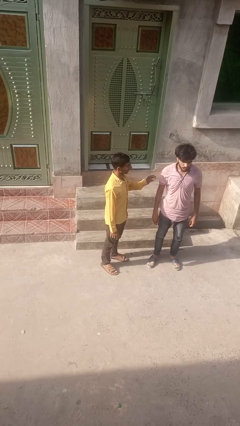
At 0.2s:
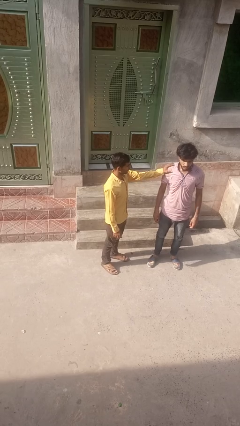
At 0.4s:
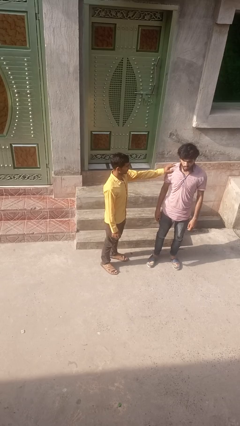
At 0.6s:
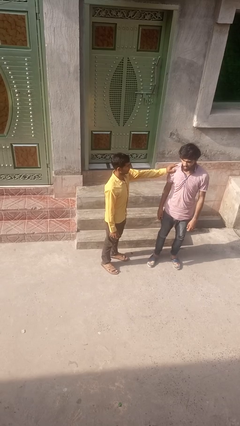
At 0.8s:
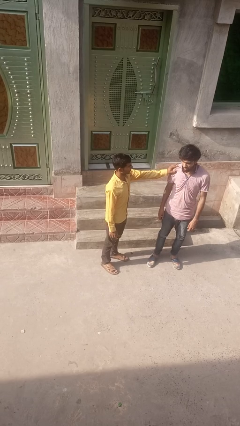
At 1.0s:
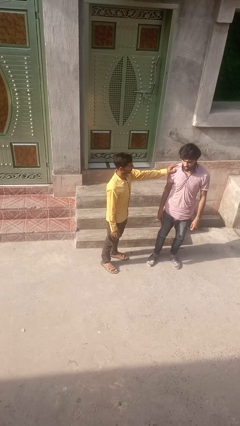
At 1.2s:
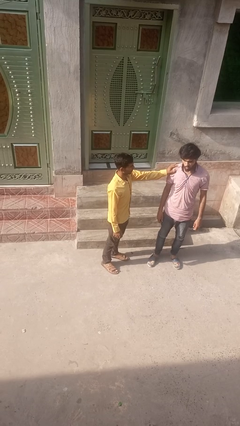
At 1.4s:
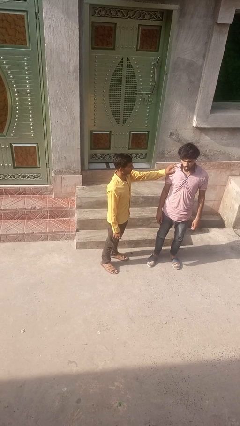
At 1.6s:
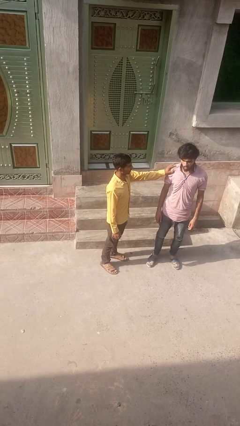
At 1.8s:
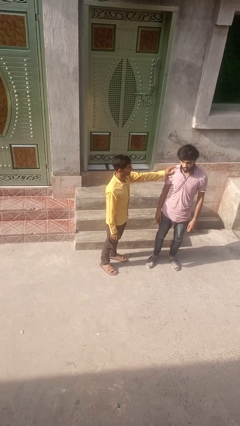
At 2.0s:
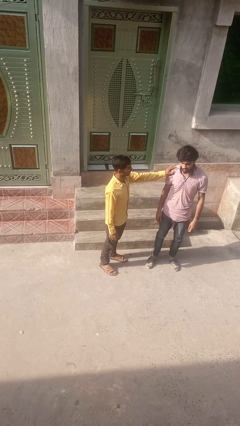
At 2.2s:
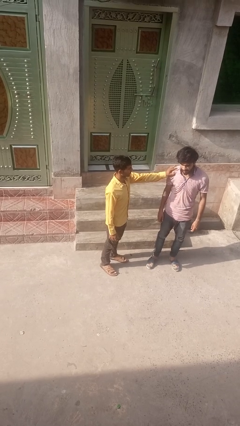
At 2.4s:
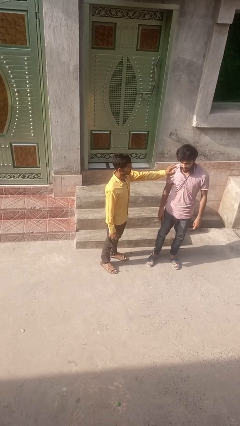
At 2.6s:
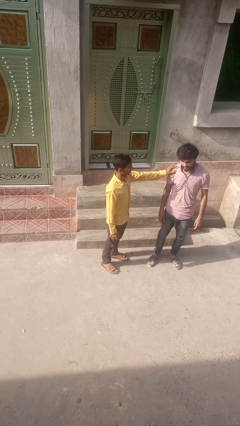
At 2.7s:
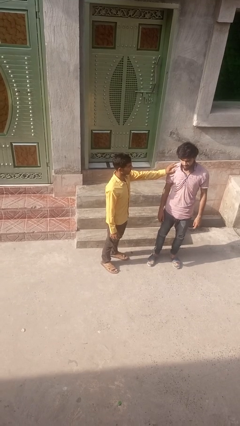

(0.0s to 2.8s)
person grabs person by shoulder

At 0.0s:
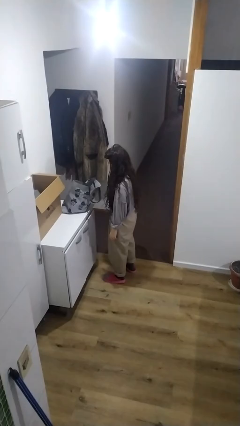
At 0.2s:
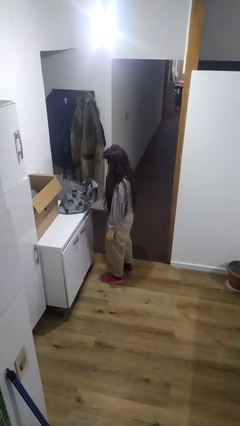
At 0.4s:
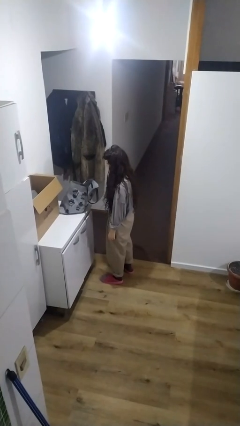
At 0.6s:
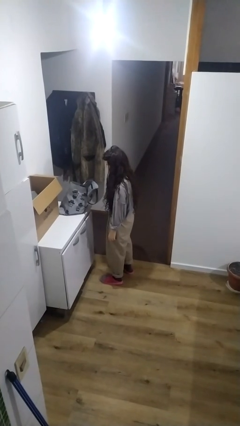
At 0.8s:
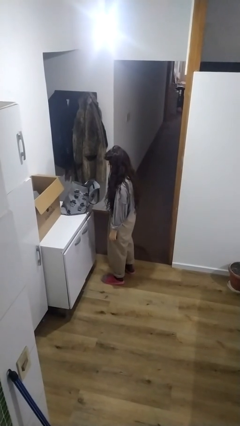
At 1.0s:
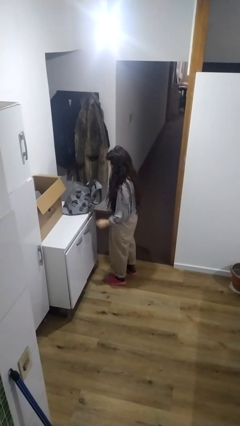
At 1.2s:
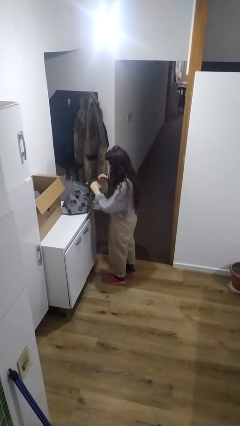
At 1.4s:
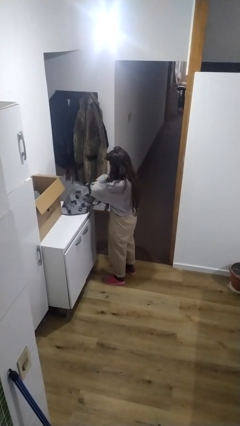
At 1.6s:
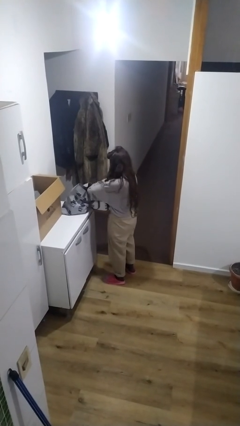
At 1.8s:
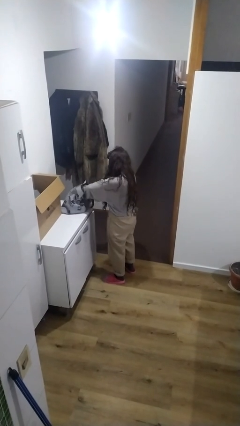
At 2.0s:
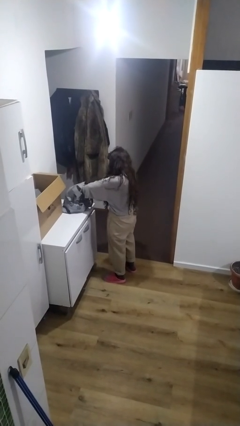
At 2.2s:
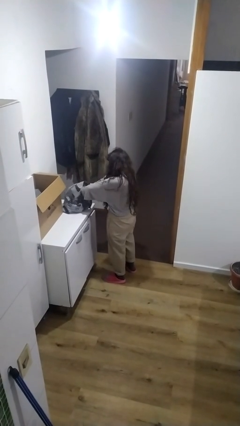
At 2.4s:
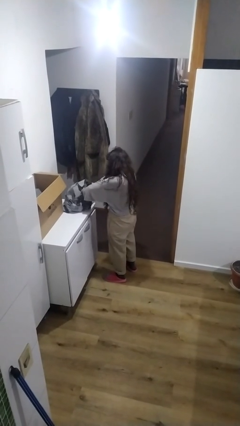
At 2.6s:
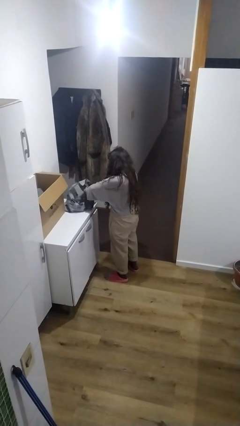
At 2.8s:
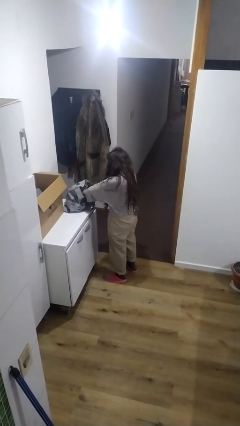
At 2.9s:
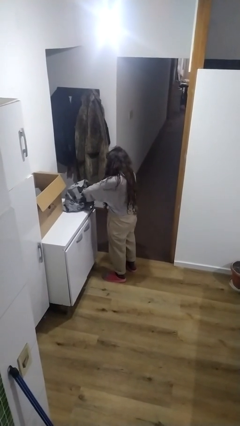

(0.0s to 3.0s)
person searches in bag

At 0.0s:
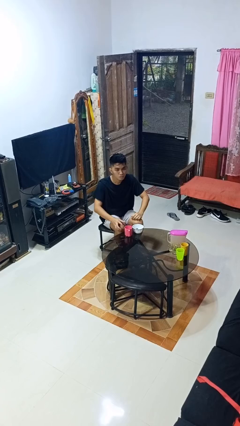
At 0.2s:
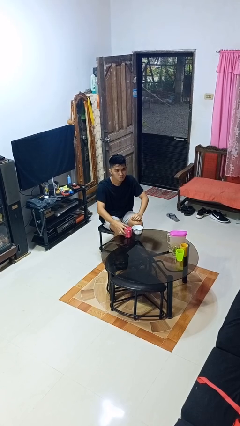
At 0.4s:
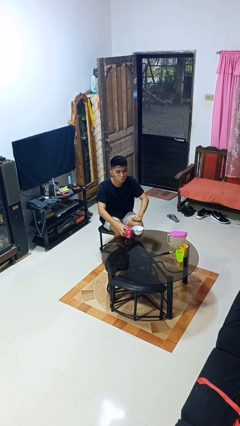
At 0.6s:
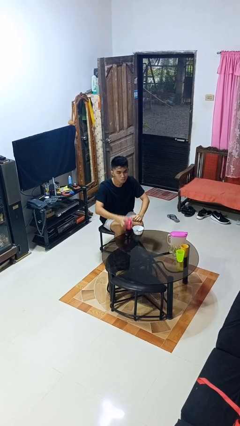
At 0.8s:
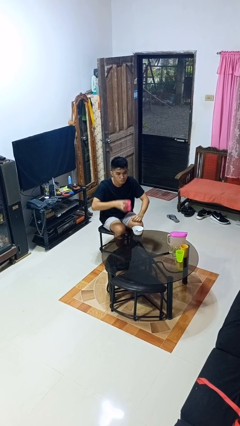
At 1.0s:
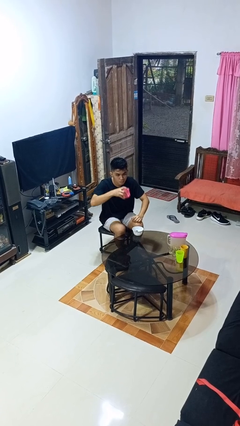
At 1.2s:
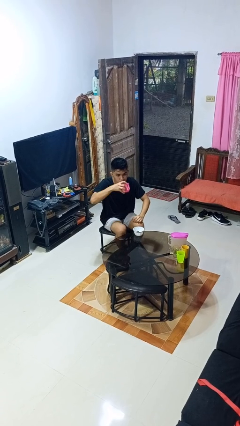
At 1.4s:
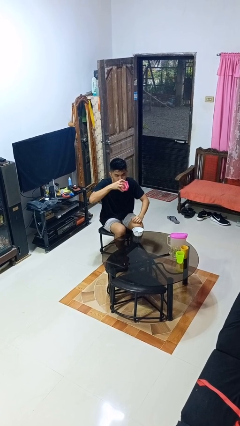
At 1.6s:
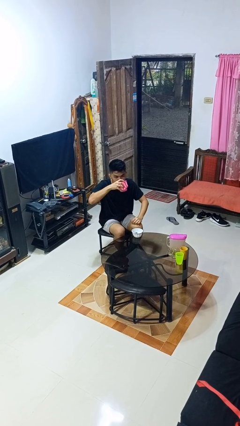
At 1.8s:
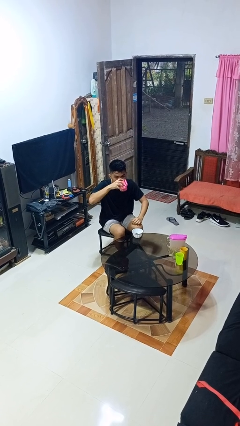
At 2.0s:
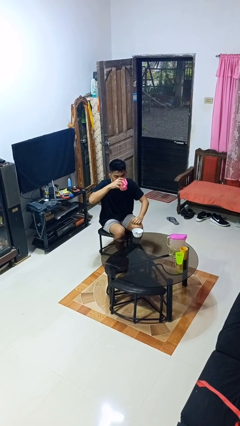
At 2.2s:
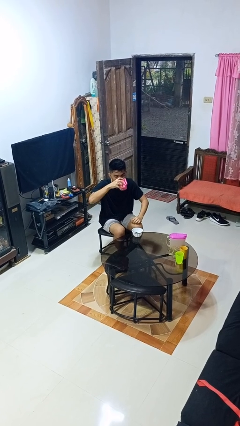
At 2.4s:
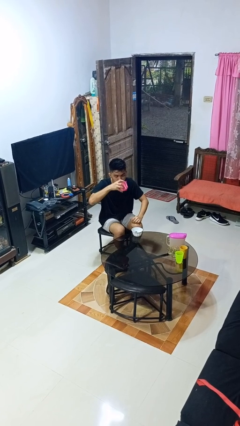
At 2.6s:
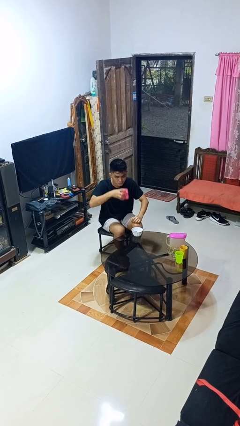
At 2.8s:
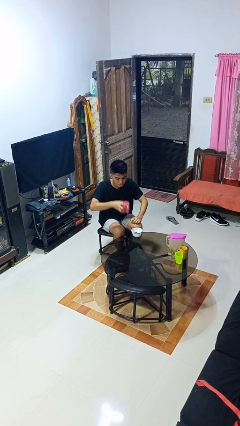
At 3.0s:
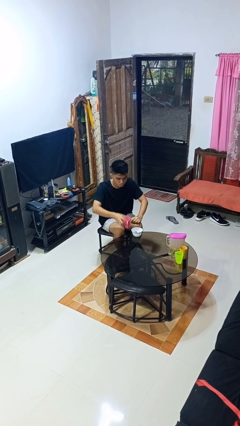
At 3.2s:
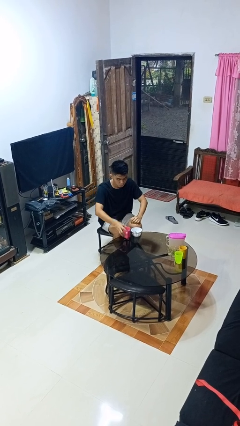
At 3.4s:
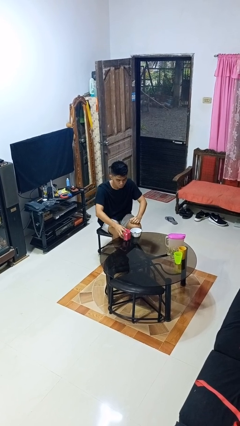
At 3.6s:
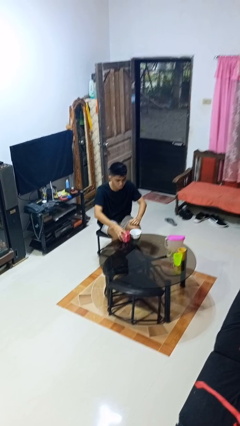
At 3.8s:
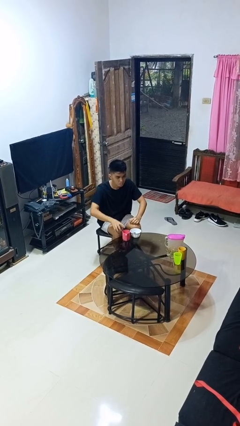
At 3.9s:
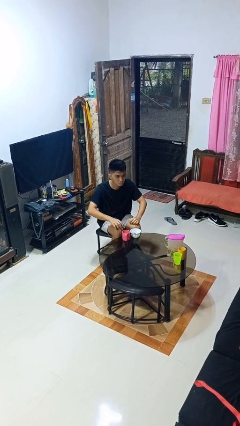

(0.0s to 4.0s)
person drinks from cup

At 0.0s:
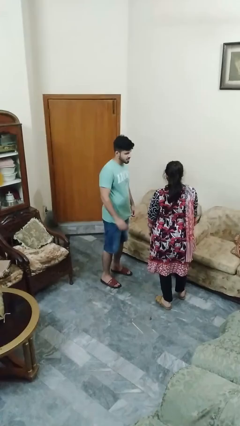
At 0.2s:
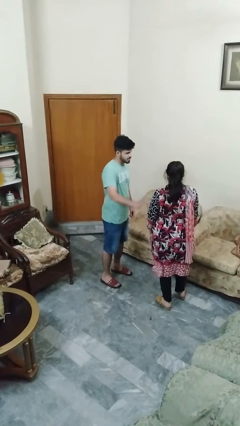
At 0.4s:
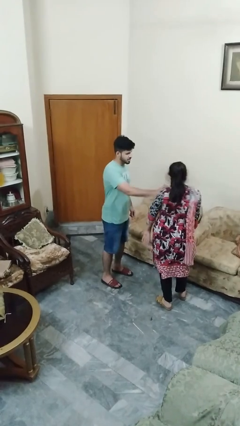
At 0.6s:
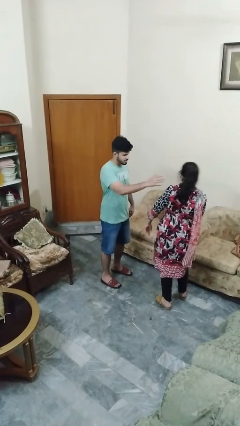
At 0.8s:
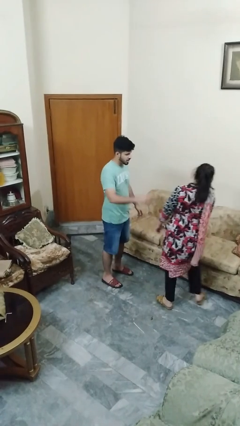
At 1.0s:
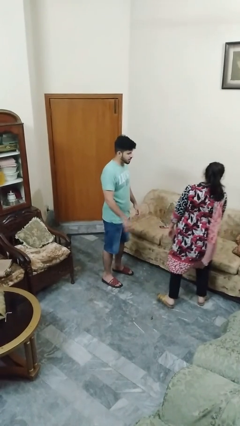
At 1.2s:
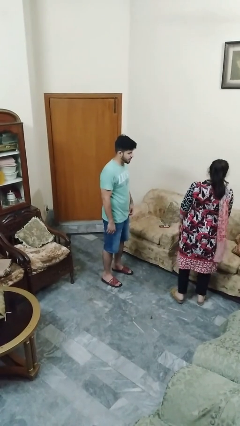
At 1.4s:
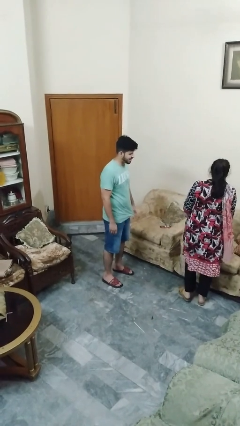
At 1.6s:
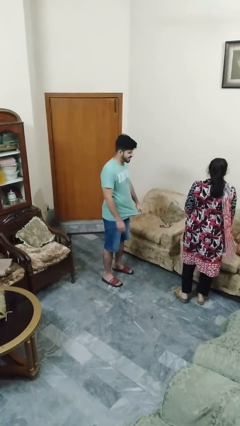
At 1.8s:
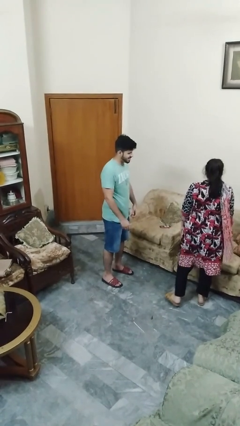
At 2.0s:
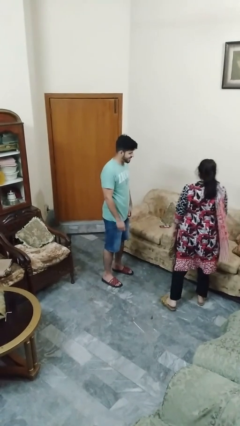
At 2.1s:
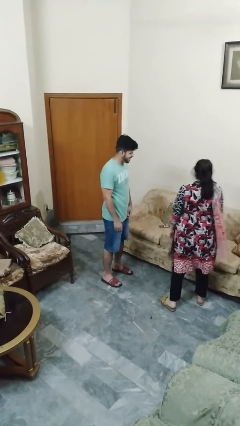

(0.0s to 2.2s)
person shoves person

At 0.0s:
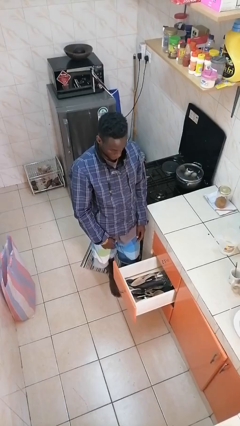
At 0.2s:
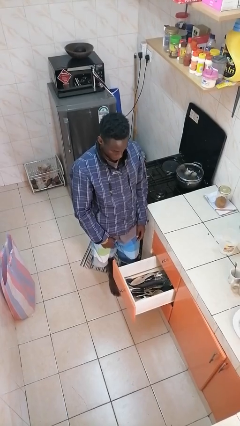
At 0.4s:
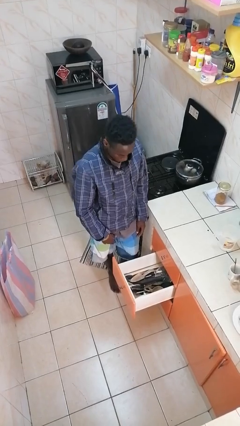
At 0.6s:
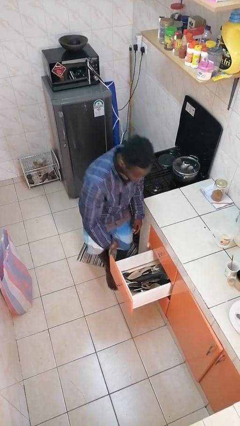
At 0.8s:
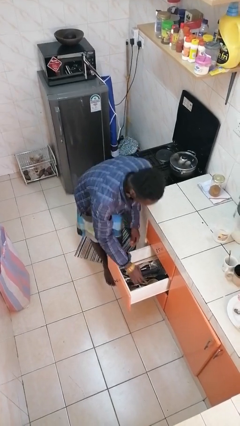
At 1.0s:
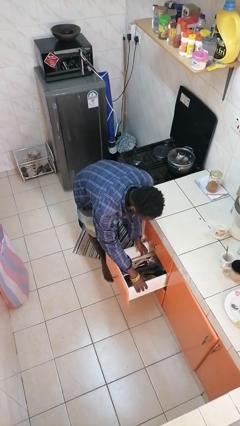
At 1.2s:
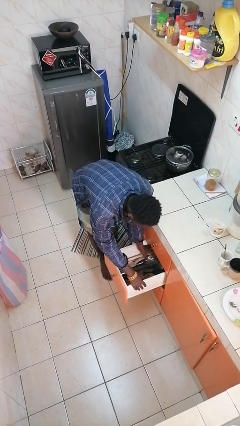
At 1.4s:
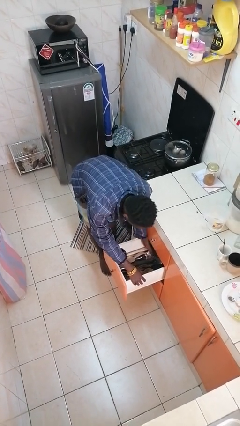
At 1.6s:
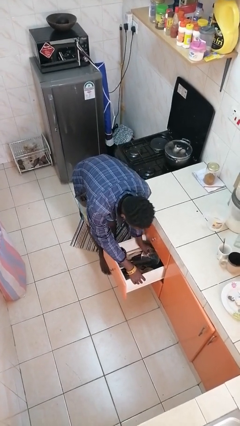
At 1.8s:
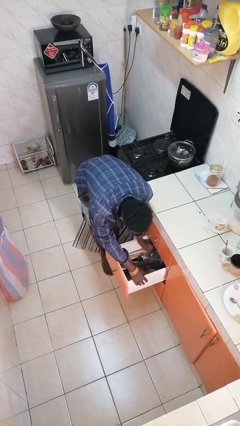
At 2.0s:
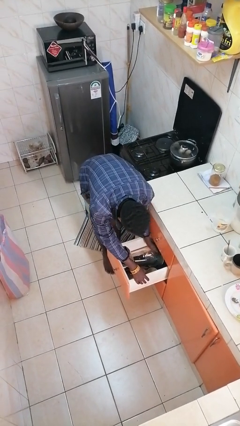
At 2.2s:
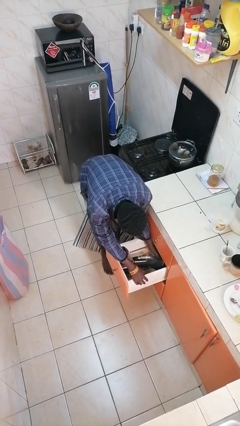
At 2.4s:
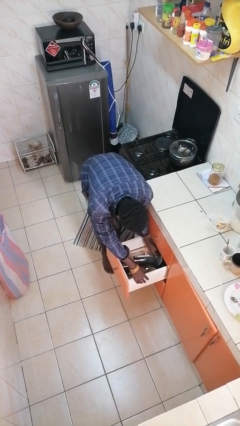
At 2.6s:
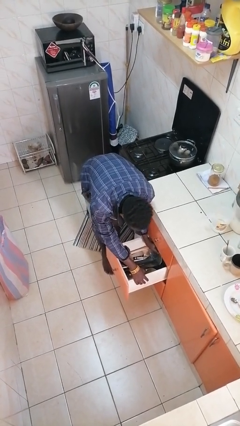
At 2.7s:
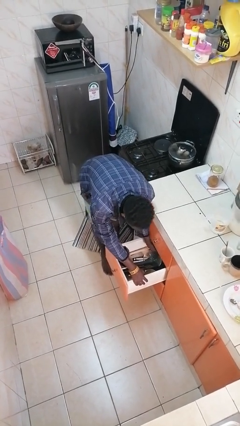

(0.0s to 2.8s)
person searches in kitchen drawer

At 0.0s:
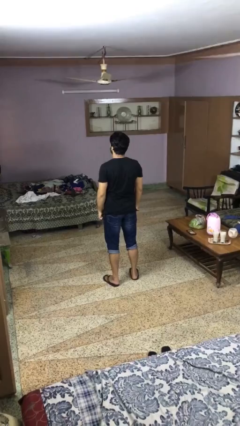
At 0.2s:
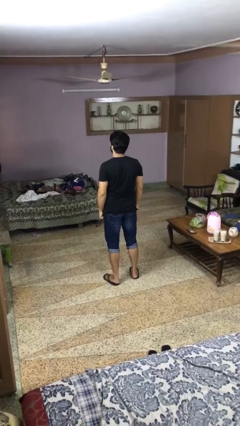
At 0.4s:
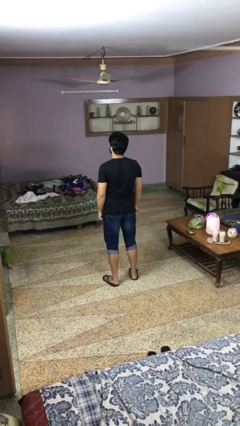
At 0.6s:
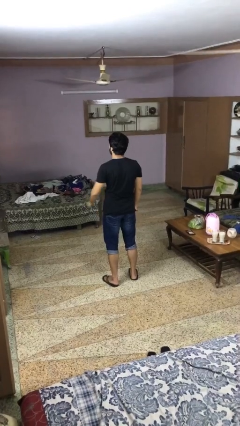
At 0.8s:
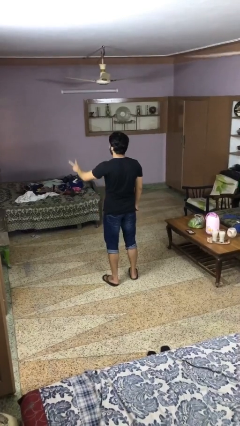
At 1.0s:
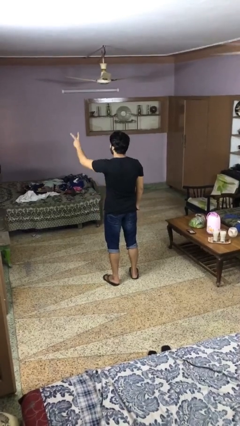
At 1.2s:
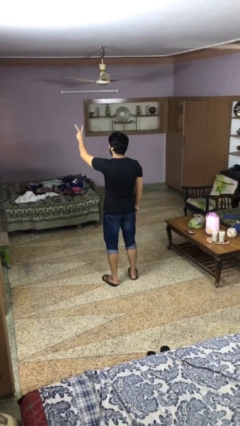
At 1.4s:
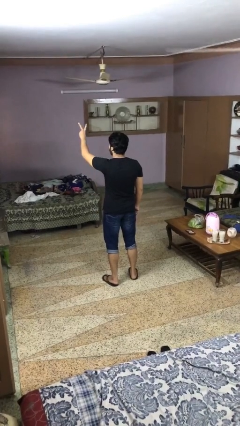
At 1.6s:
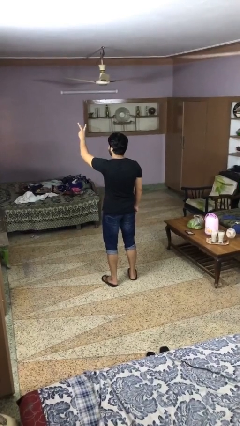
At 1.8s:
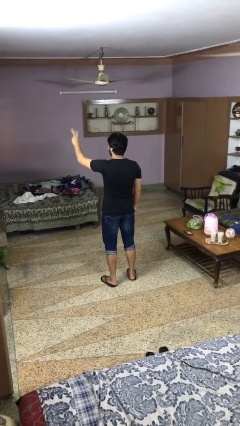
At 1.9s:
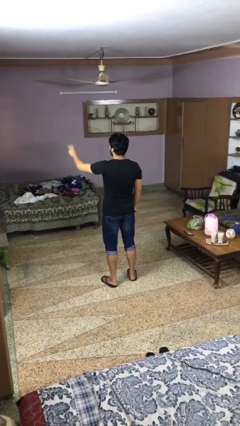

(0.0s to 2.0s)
person gestures peace

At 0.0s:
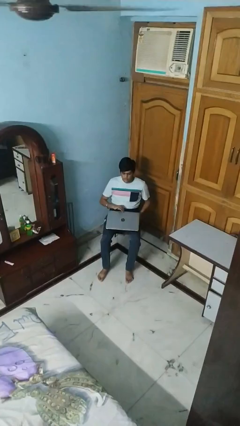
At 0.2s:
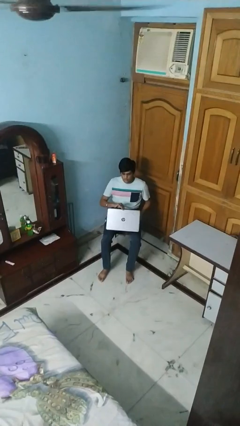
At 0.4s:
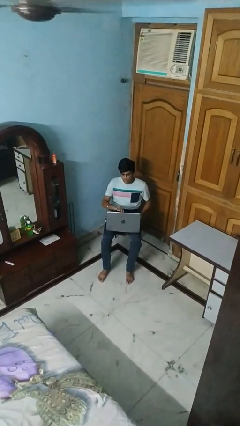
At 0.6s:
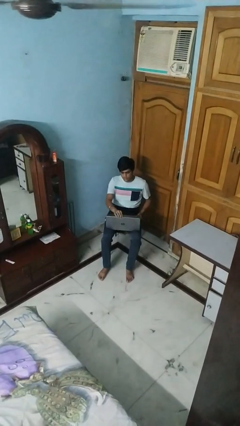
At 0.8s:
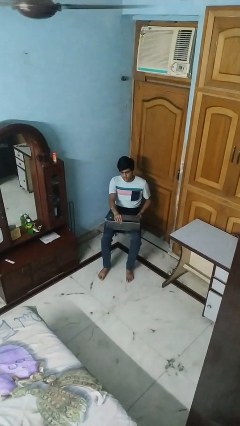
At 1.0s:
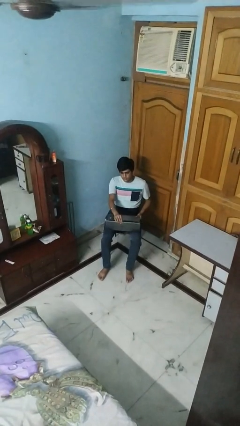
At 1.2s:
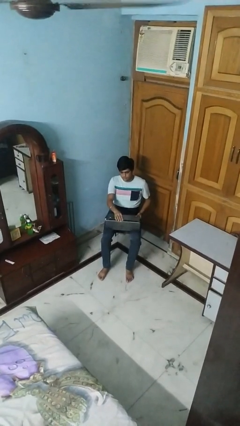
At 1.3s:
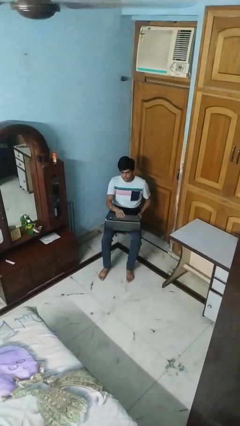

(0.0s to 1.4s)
person opens laptop
